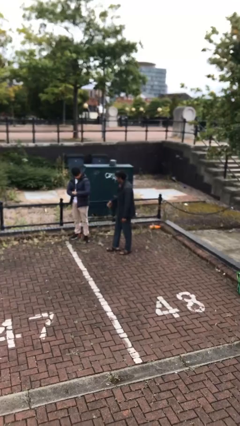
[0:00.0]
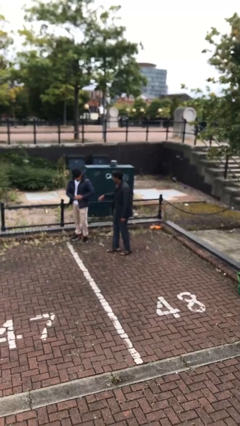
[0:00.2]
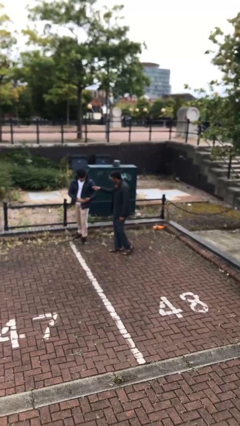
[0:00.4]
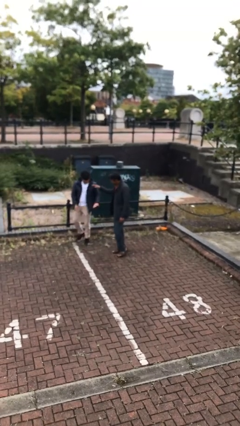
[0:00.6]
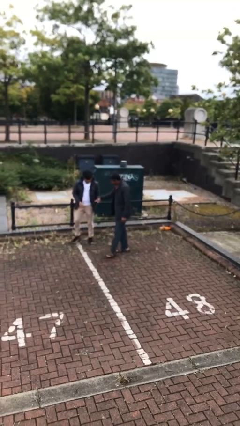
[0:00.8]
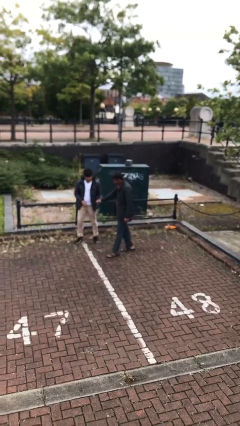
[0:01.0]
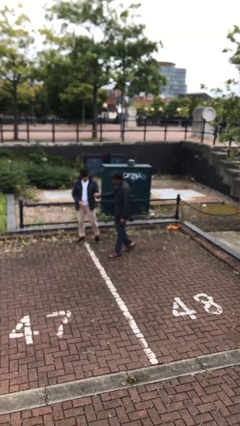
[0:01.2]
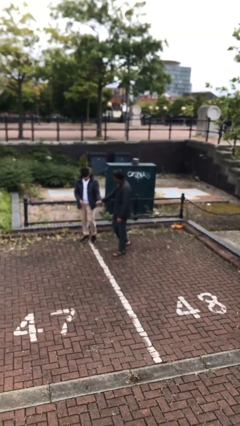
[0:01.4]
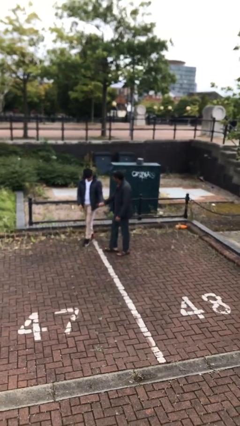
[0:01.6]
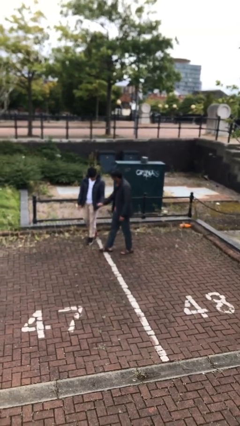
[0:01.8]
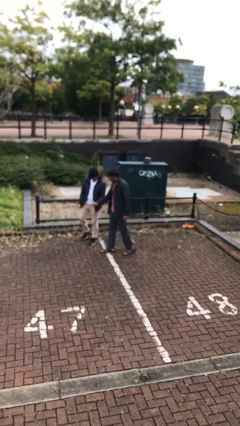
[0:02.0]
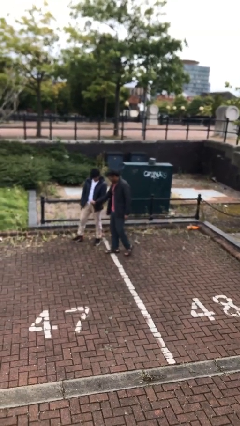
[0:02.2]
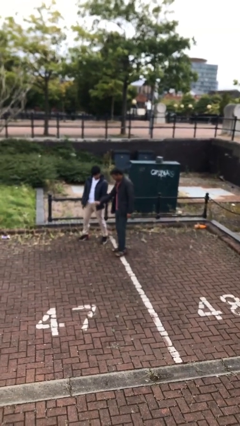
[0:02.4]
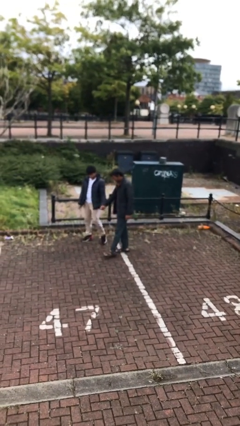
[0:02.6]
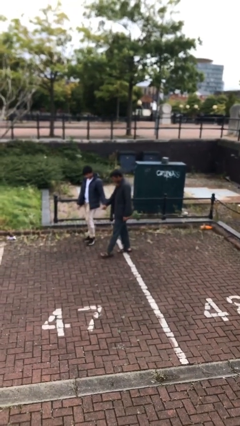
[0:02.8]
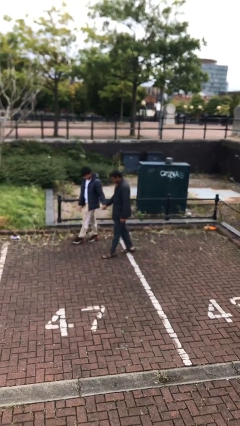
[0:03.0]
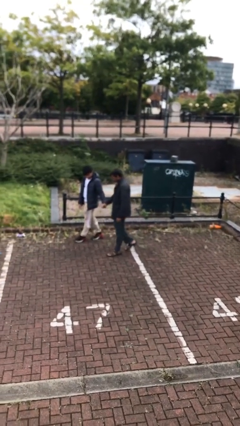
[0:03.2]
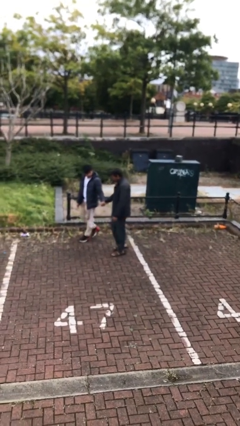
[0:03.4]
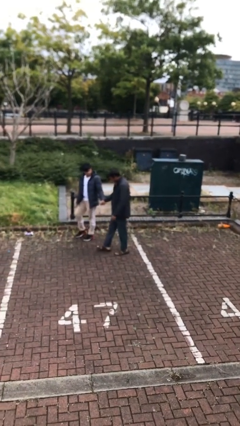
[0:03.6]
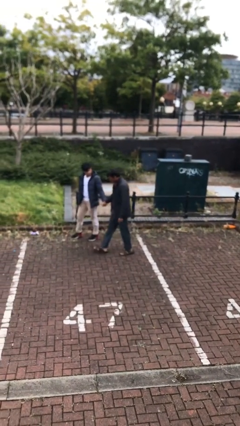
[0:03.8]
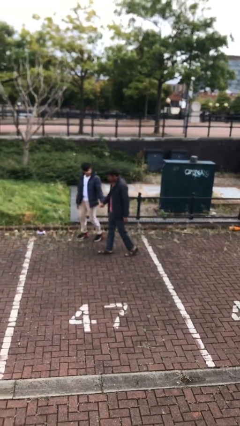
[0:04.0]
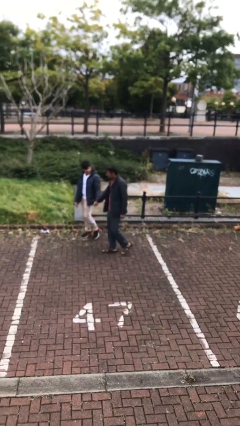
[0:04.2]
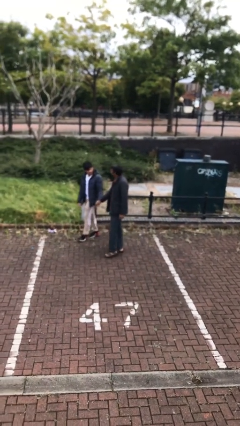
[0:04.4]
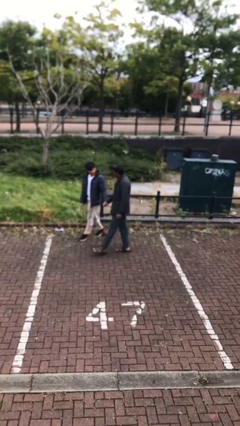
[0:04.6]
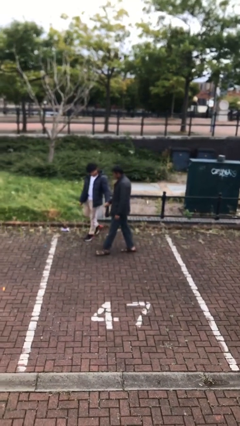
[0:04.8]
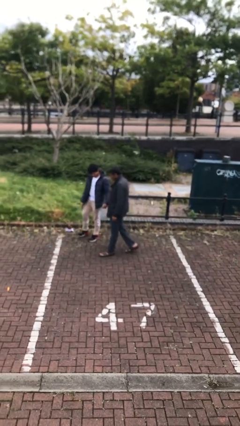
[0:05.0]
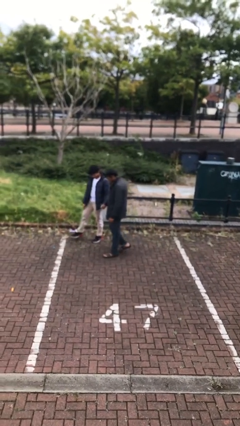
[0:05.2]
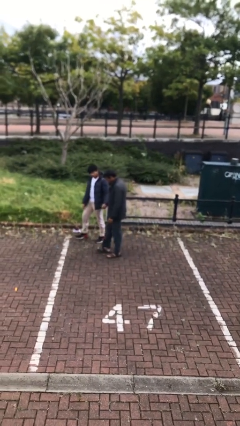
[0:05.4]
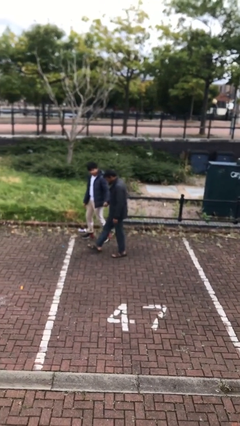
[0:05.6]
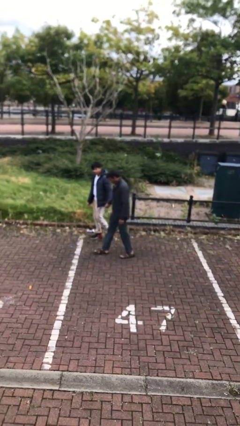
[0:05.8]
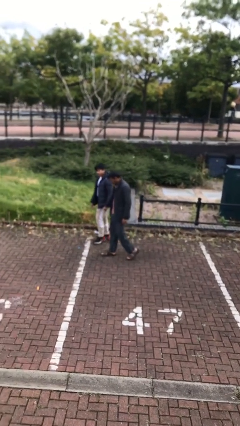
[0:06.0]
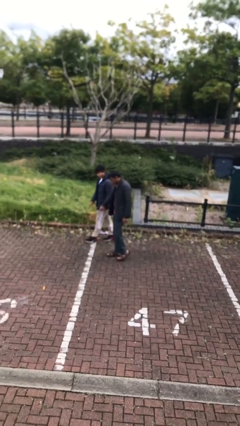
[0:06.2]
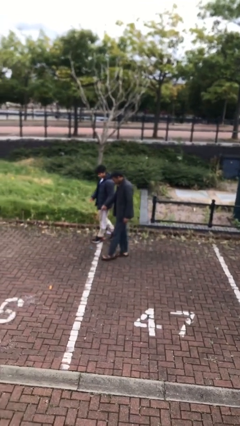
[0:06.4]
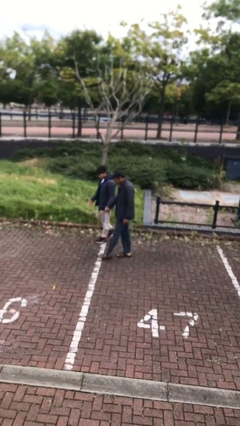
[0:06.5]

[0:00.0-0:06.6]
person holds hand

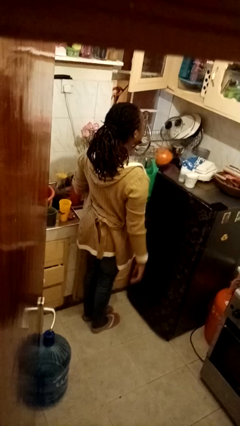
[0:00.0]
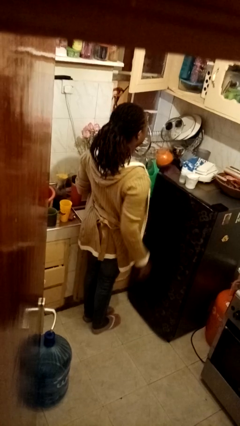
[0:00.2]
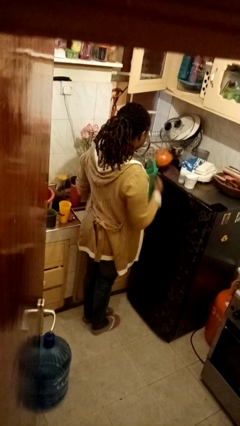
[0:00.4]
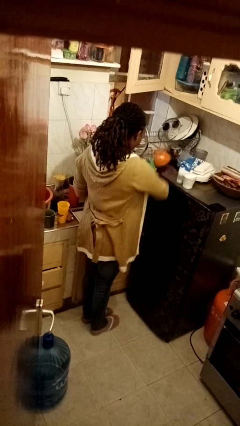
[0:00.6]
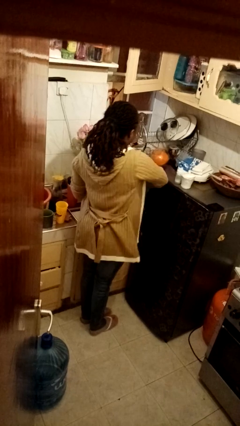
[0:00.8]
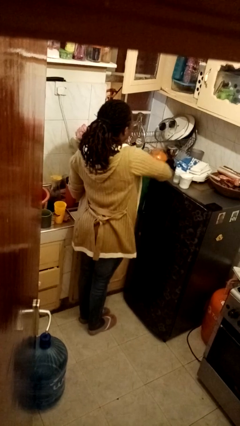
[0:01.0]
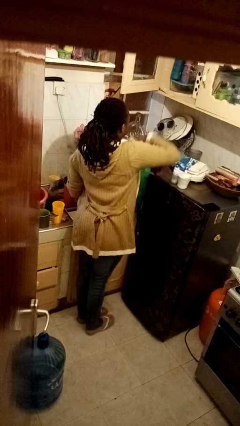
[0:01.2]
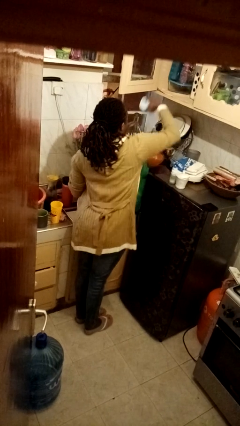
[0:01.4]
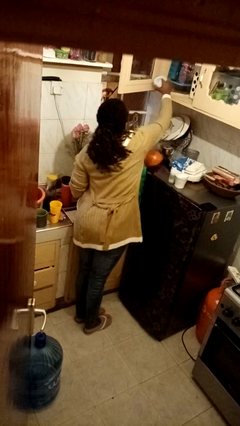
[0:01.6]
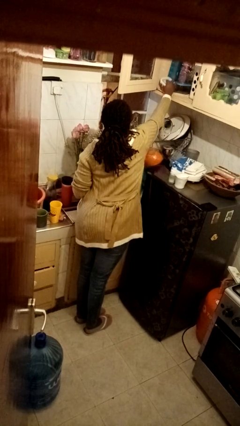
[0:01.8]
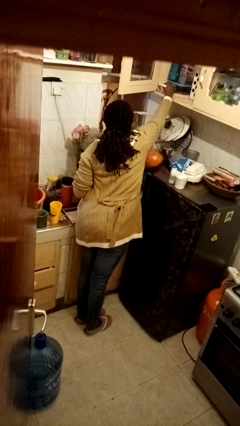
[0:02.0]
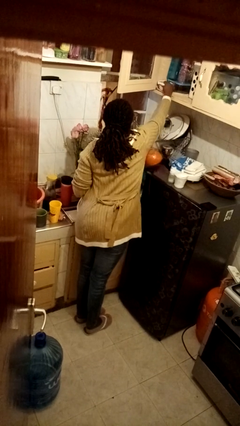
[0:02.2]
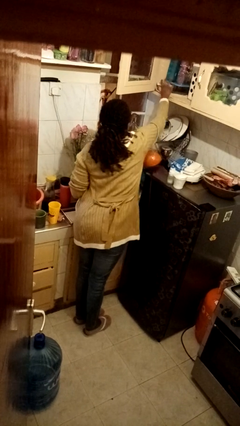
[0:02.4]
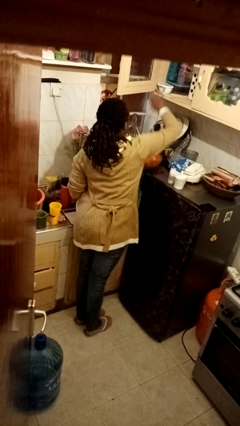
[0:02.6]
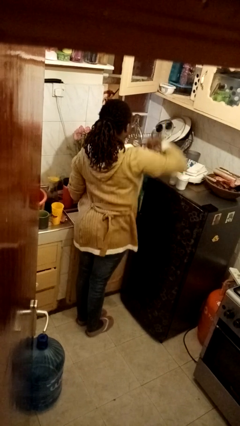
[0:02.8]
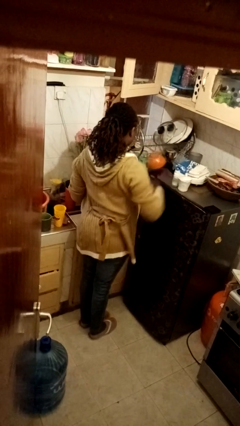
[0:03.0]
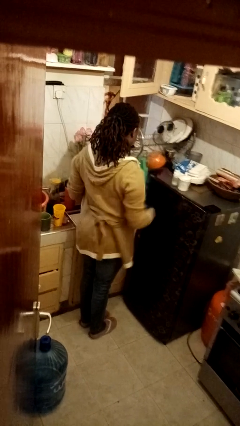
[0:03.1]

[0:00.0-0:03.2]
person loads groceries into cabinet

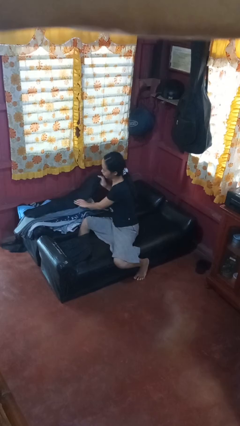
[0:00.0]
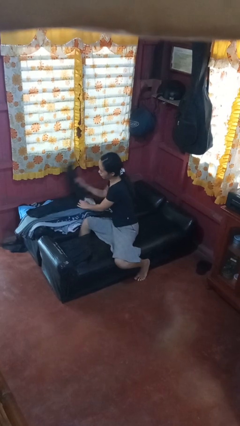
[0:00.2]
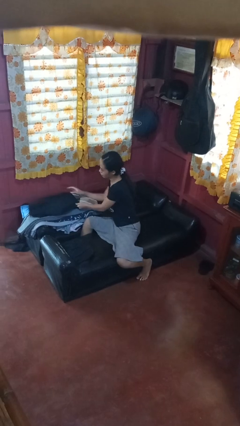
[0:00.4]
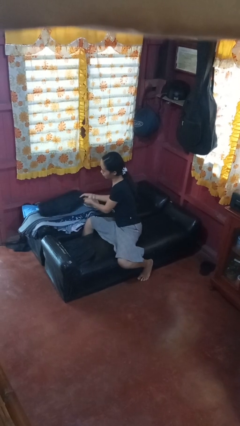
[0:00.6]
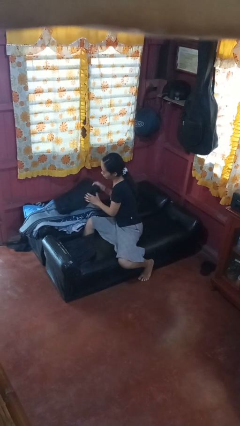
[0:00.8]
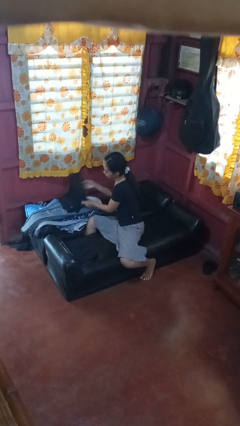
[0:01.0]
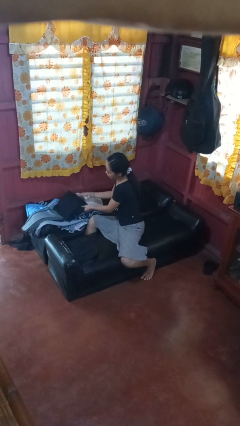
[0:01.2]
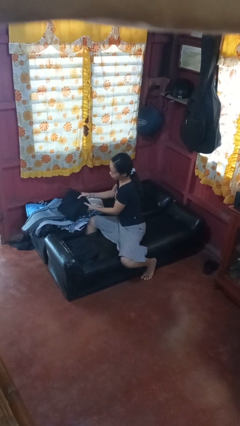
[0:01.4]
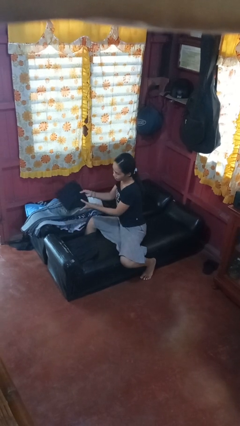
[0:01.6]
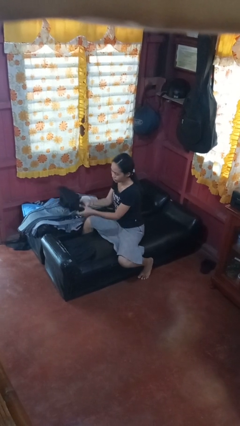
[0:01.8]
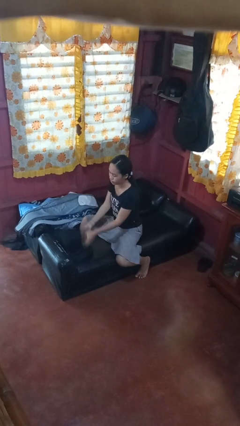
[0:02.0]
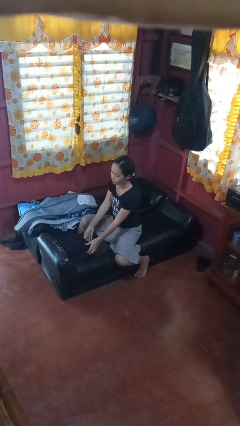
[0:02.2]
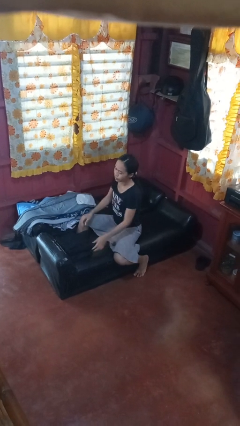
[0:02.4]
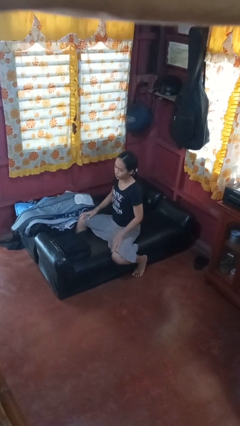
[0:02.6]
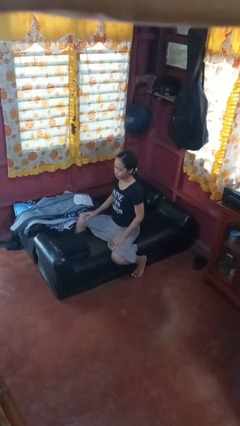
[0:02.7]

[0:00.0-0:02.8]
person folds pants

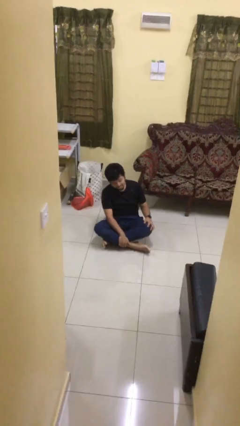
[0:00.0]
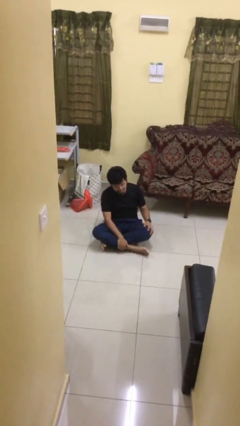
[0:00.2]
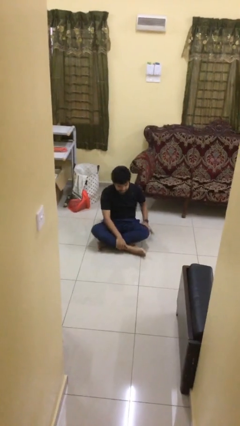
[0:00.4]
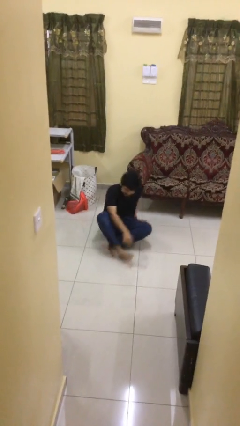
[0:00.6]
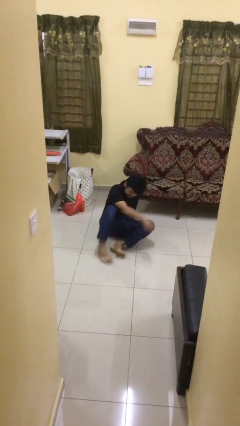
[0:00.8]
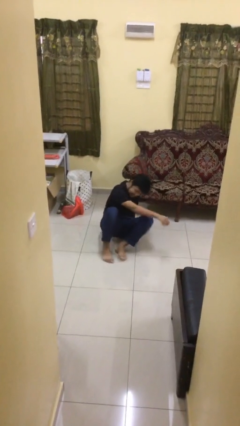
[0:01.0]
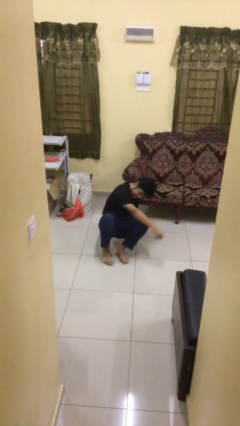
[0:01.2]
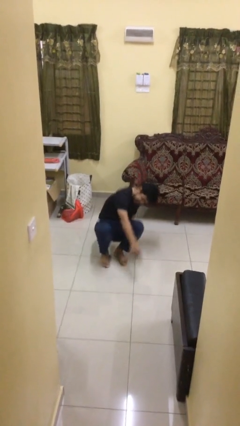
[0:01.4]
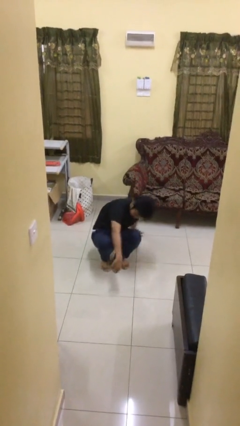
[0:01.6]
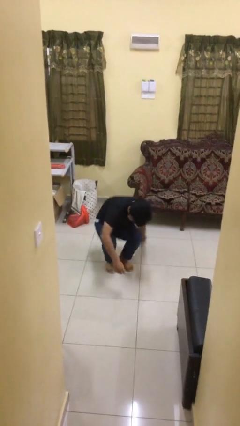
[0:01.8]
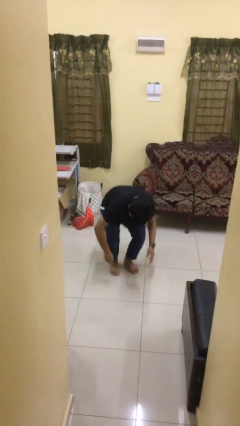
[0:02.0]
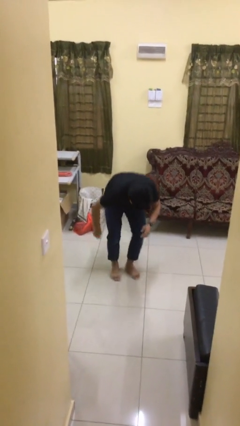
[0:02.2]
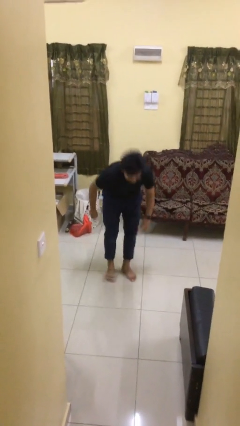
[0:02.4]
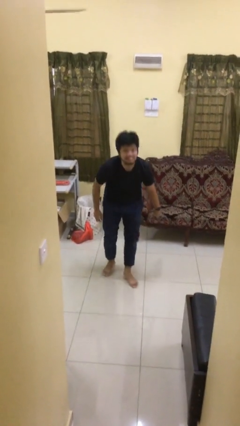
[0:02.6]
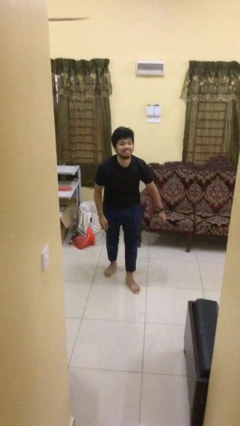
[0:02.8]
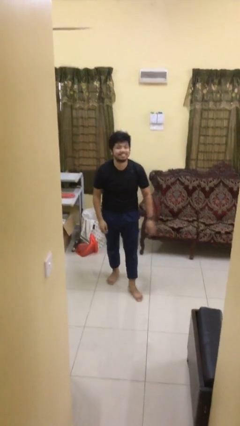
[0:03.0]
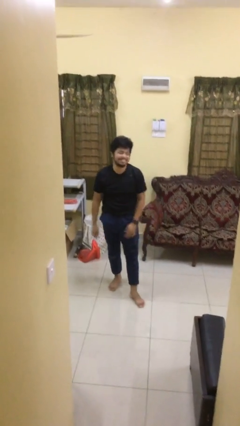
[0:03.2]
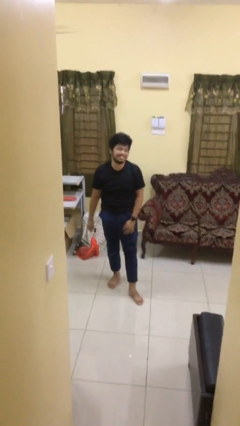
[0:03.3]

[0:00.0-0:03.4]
person stands up from floor

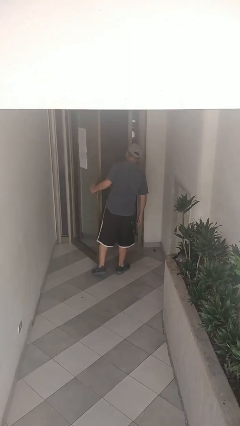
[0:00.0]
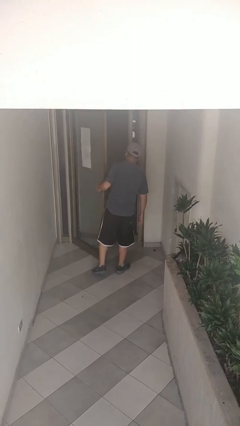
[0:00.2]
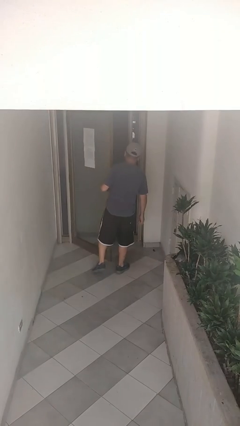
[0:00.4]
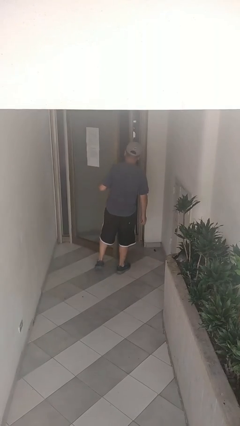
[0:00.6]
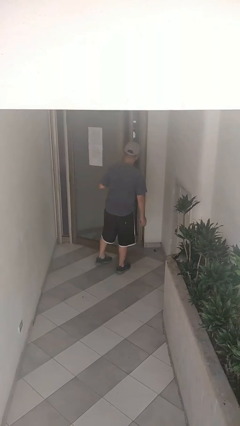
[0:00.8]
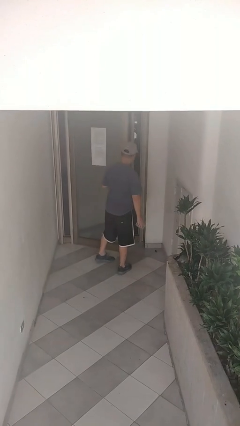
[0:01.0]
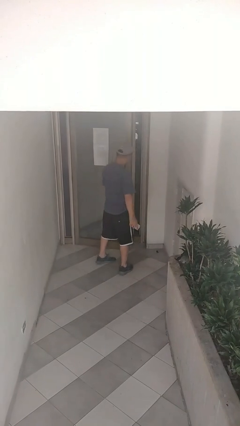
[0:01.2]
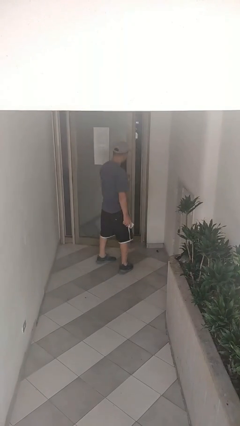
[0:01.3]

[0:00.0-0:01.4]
person closes facility door
